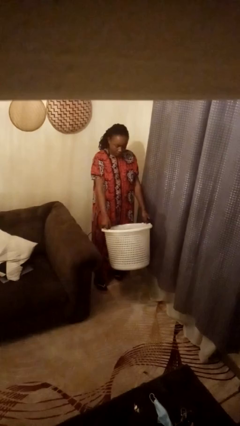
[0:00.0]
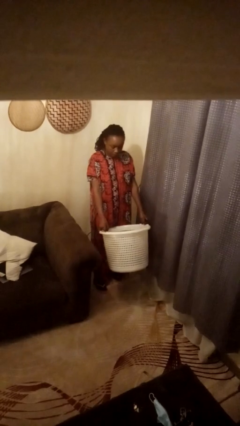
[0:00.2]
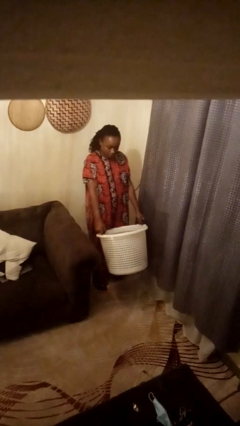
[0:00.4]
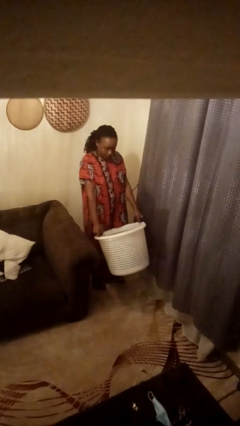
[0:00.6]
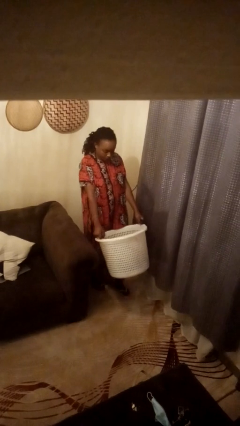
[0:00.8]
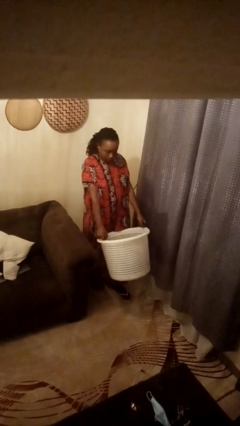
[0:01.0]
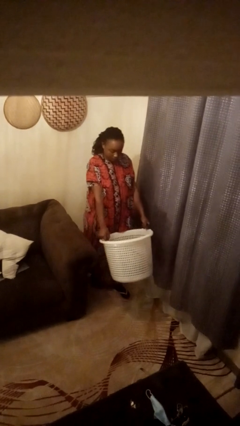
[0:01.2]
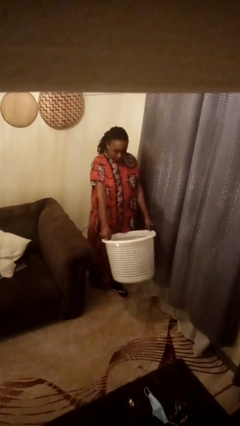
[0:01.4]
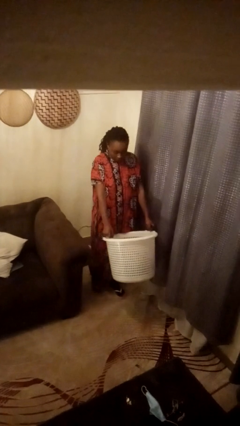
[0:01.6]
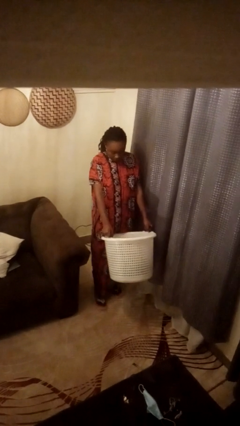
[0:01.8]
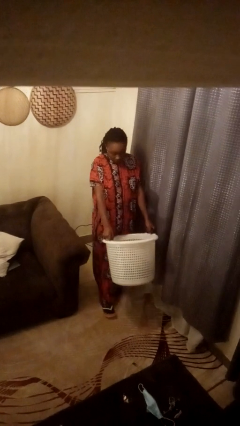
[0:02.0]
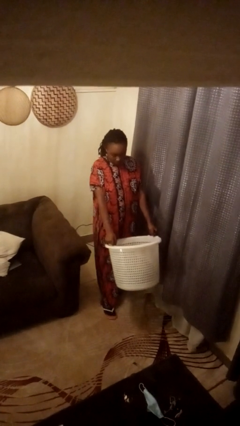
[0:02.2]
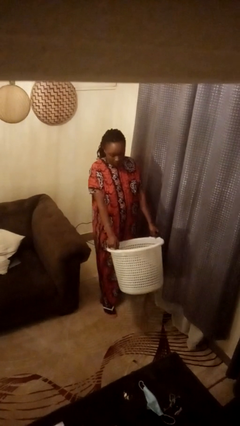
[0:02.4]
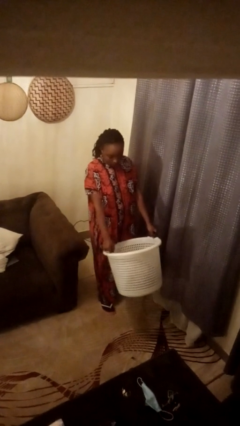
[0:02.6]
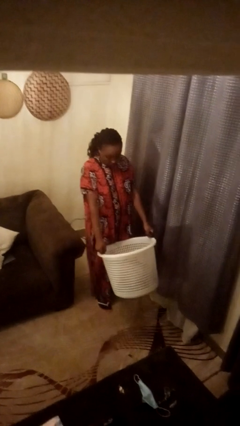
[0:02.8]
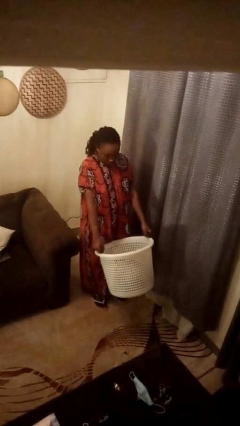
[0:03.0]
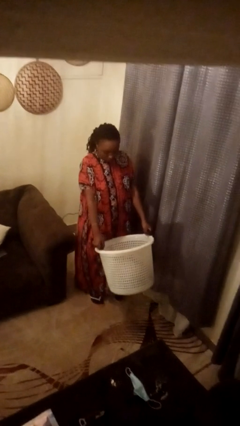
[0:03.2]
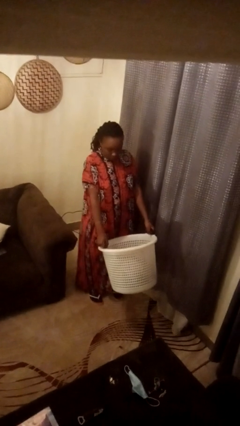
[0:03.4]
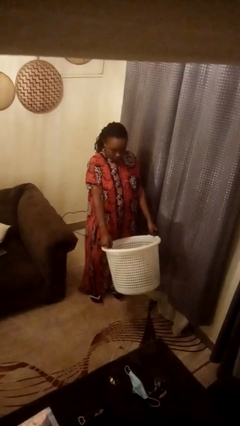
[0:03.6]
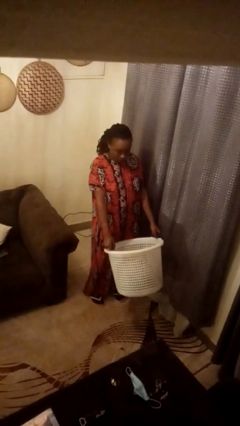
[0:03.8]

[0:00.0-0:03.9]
person carries laundry basket

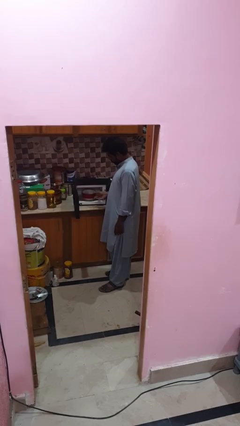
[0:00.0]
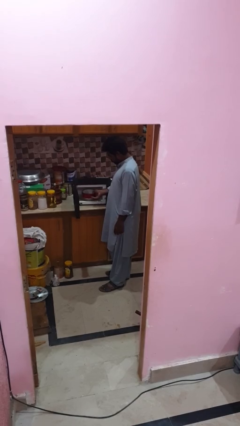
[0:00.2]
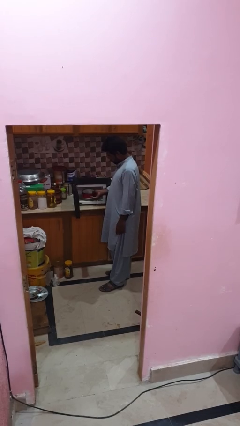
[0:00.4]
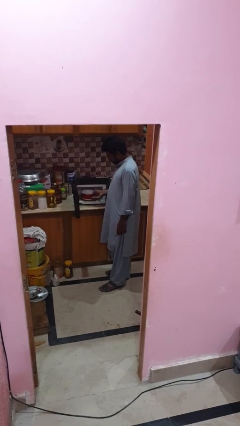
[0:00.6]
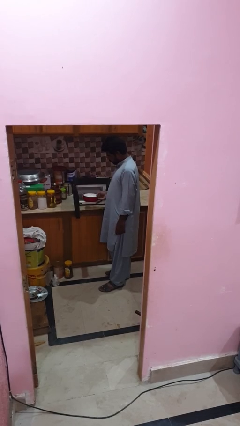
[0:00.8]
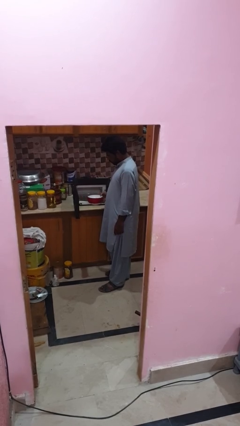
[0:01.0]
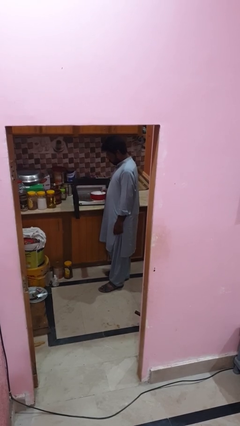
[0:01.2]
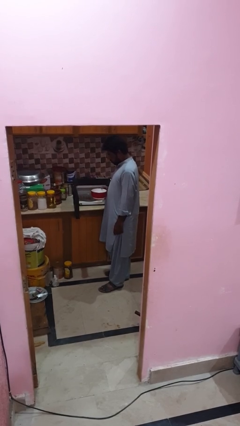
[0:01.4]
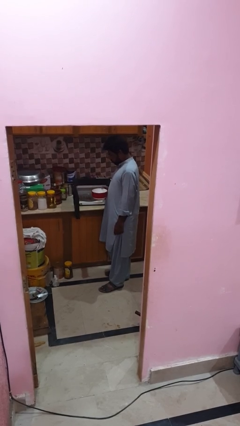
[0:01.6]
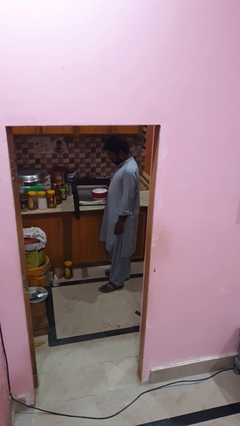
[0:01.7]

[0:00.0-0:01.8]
person takes object from microwave

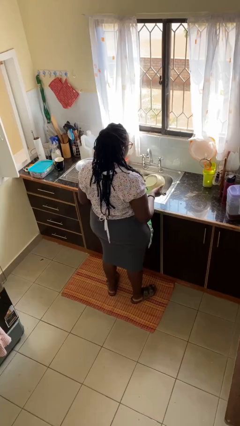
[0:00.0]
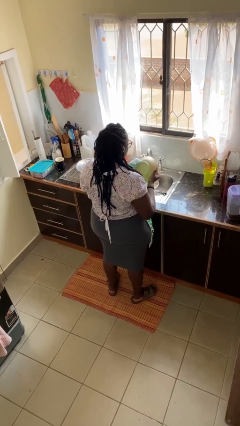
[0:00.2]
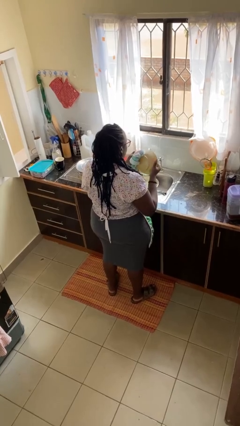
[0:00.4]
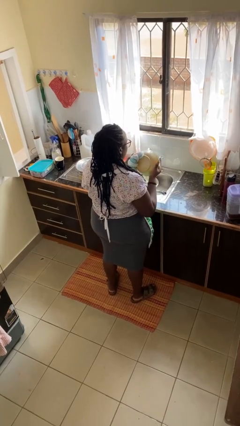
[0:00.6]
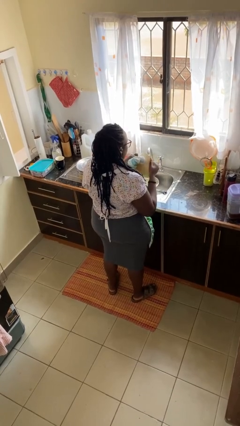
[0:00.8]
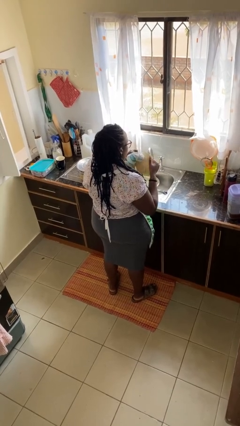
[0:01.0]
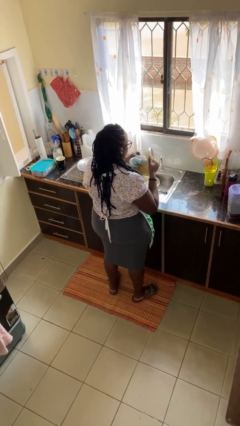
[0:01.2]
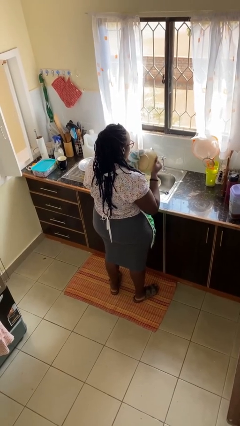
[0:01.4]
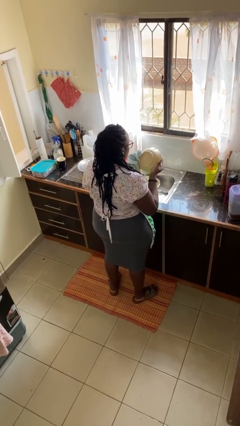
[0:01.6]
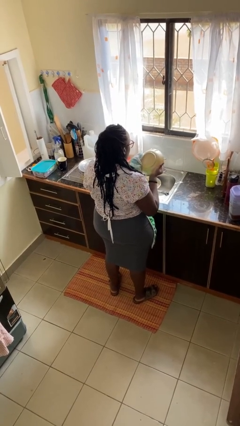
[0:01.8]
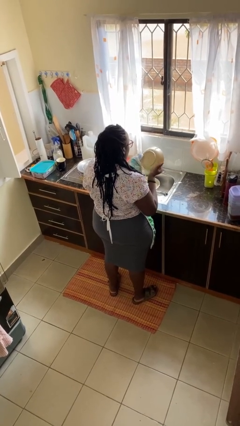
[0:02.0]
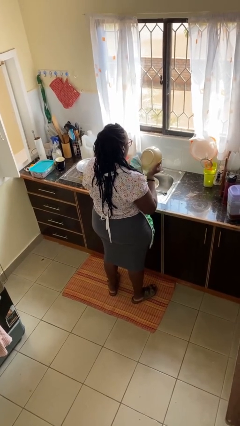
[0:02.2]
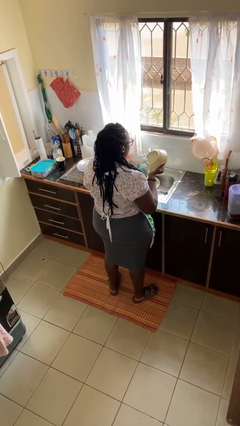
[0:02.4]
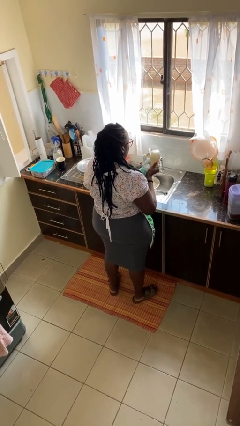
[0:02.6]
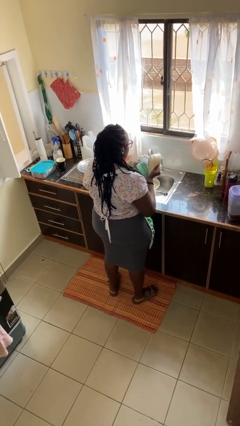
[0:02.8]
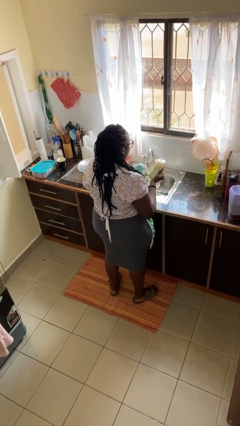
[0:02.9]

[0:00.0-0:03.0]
person dries dish

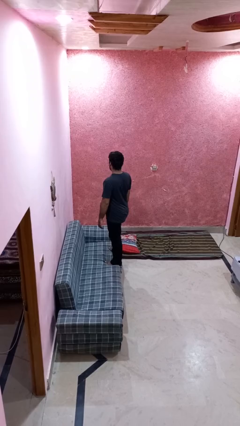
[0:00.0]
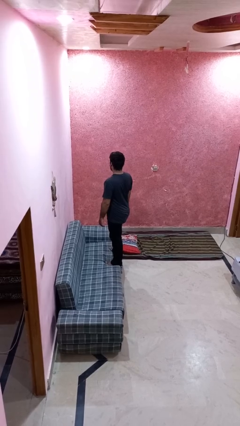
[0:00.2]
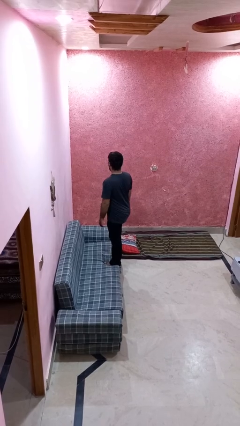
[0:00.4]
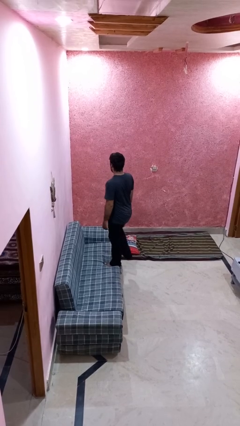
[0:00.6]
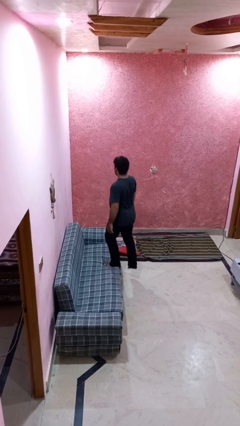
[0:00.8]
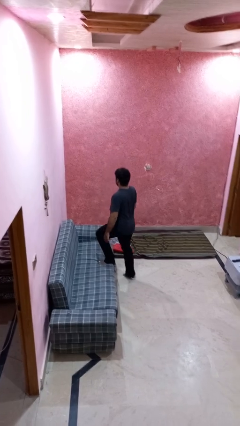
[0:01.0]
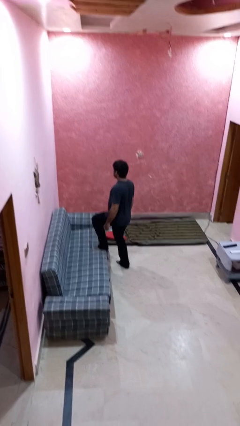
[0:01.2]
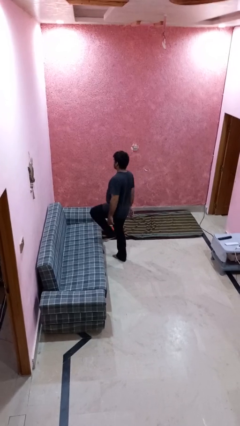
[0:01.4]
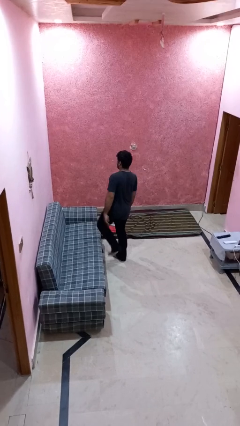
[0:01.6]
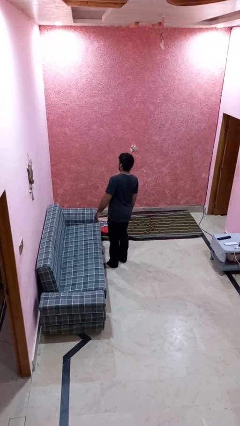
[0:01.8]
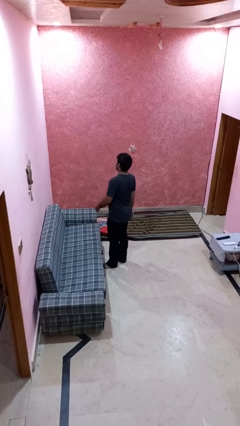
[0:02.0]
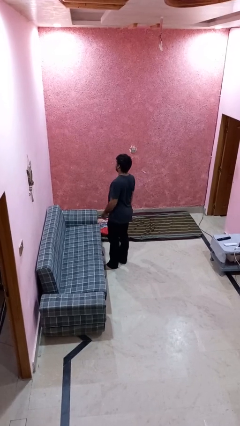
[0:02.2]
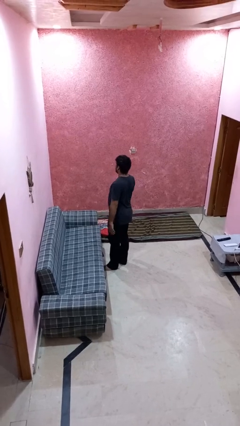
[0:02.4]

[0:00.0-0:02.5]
person climbs off couch

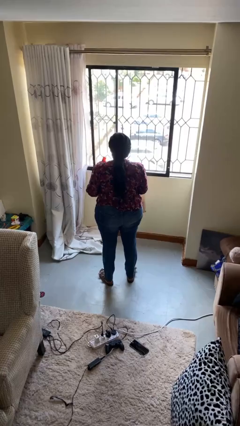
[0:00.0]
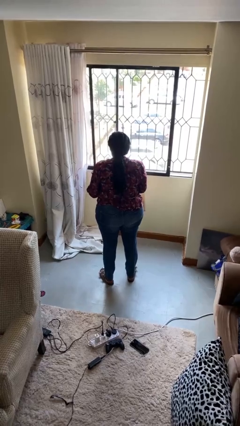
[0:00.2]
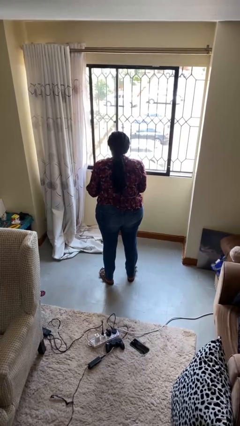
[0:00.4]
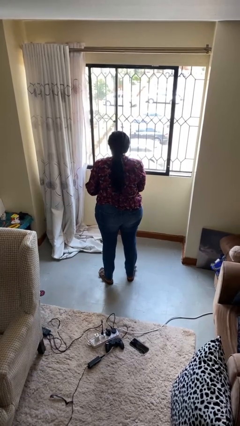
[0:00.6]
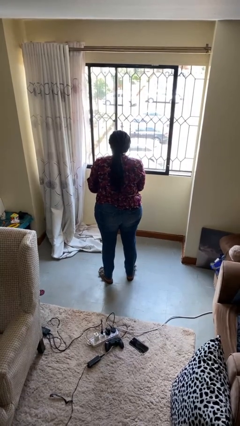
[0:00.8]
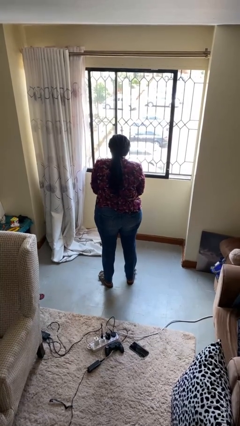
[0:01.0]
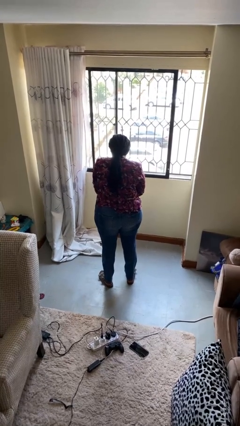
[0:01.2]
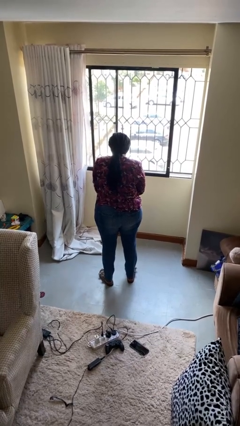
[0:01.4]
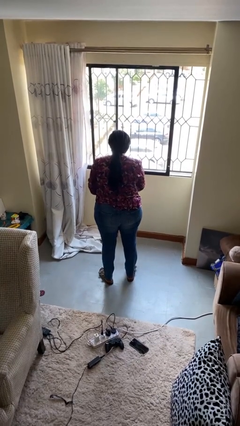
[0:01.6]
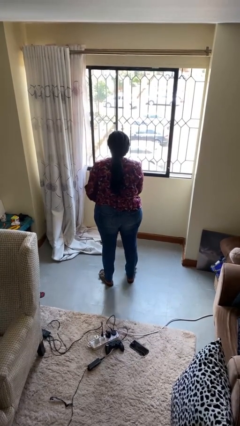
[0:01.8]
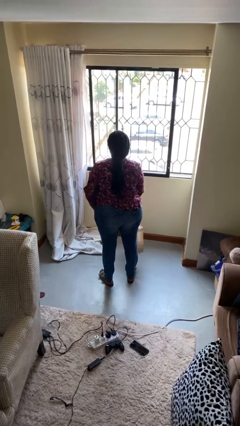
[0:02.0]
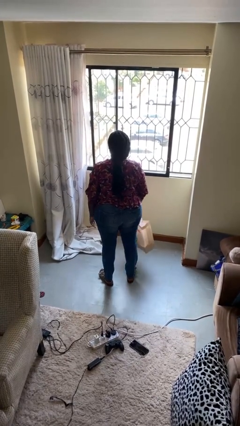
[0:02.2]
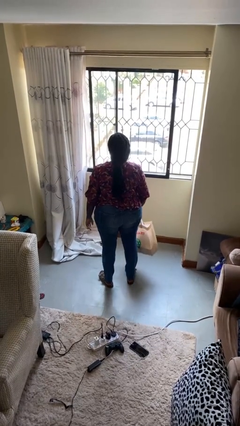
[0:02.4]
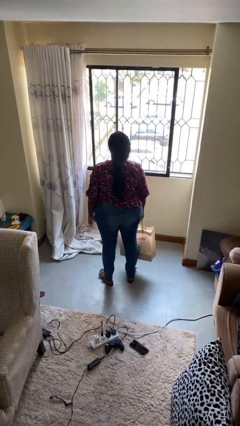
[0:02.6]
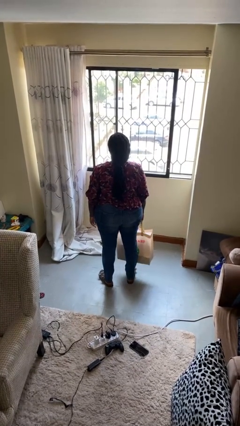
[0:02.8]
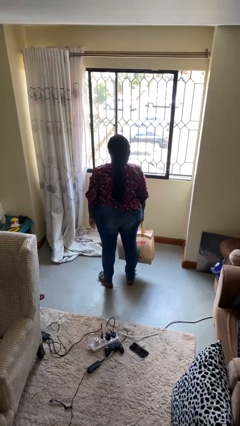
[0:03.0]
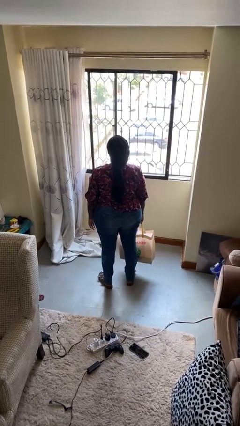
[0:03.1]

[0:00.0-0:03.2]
person puts object into bag

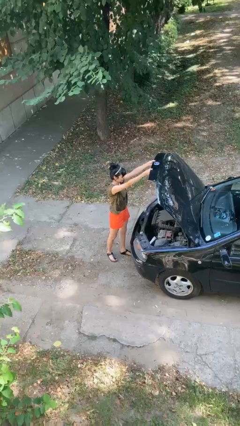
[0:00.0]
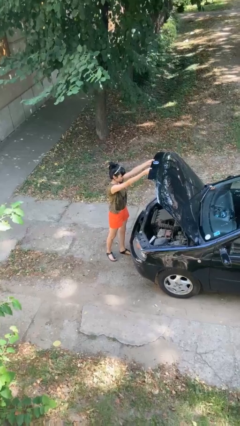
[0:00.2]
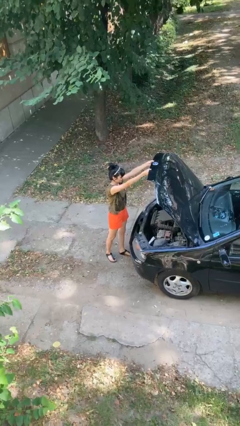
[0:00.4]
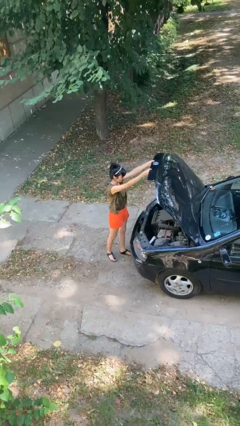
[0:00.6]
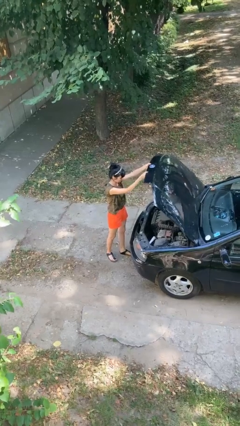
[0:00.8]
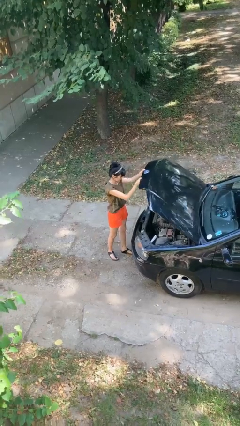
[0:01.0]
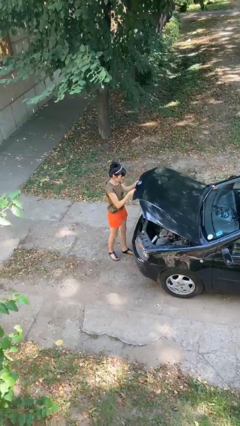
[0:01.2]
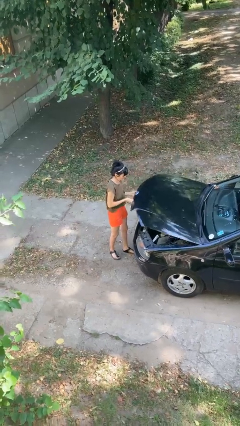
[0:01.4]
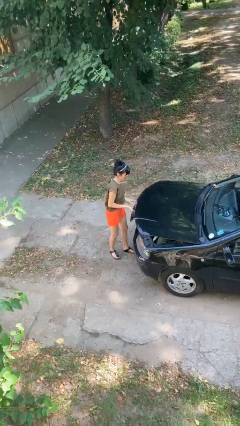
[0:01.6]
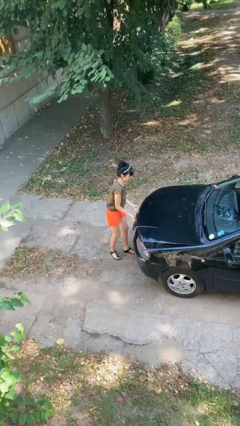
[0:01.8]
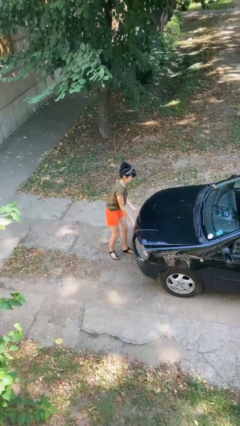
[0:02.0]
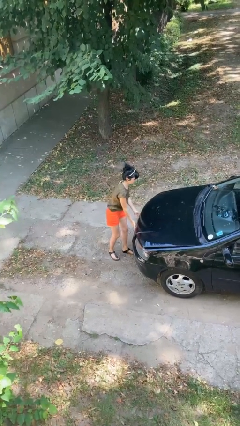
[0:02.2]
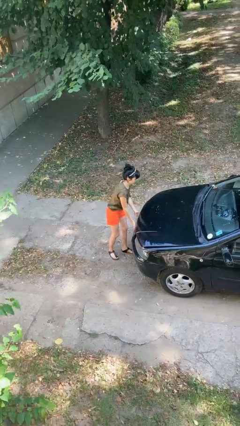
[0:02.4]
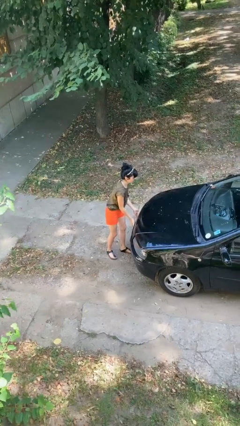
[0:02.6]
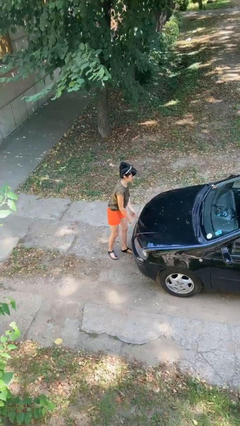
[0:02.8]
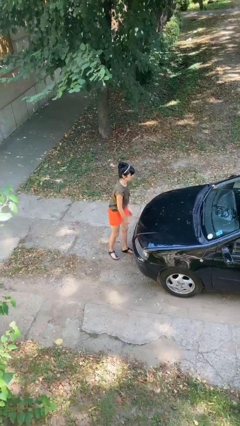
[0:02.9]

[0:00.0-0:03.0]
person closes car hood
